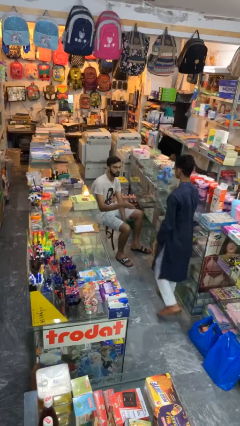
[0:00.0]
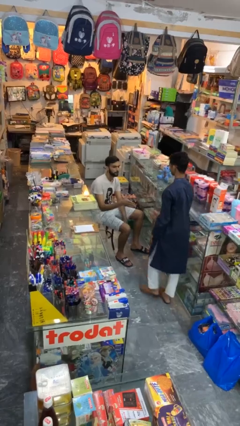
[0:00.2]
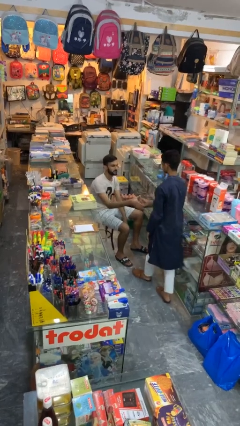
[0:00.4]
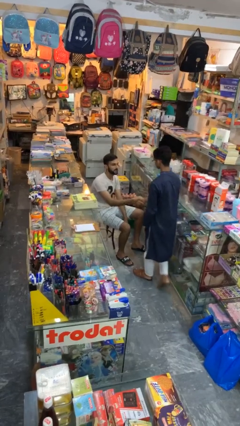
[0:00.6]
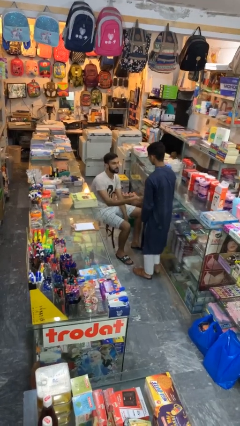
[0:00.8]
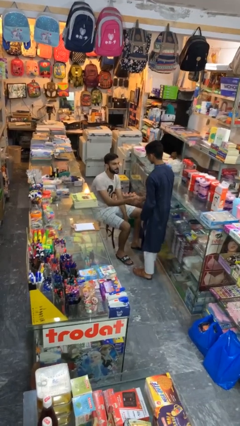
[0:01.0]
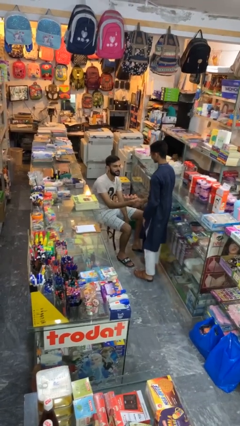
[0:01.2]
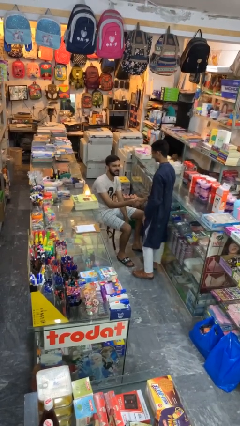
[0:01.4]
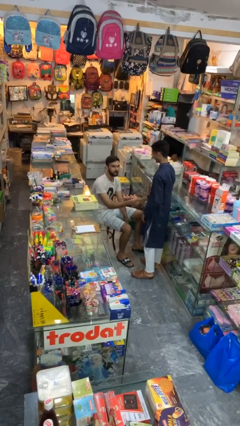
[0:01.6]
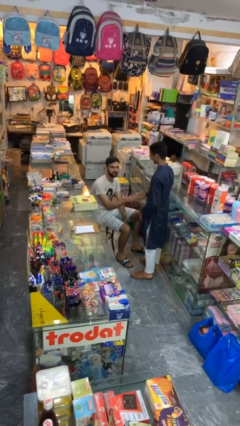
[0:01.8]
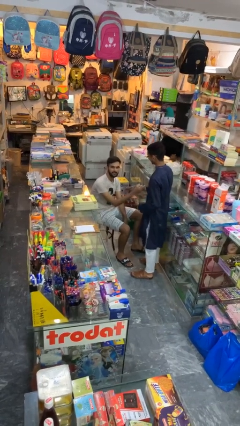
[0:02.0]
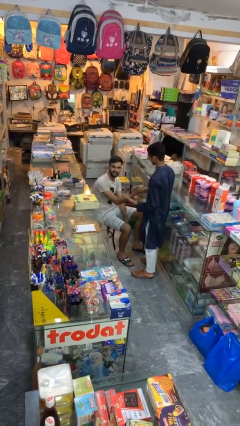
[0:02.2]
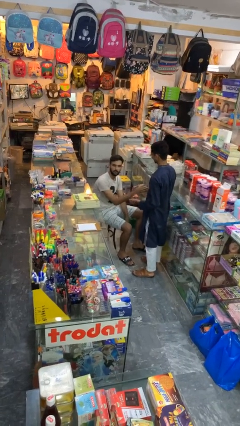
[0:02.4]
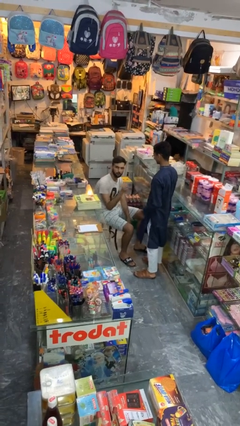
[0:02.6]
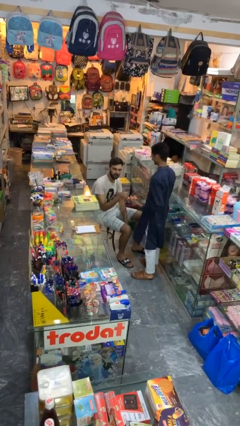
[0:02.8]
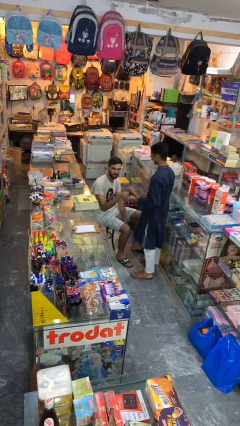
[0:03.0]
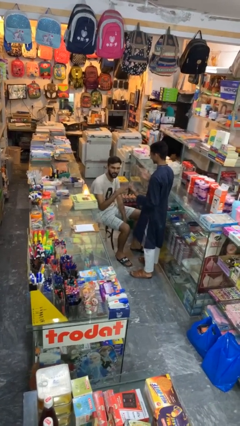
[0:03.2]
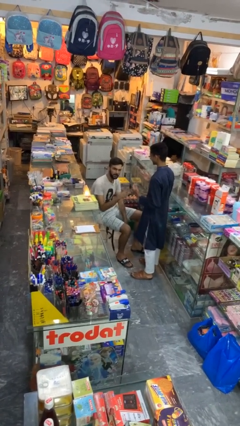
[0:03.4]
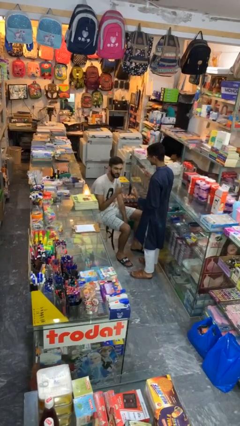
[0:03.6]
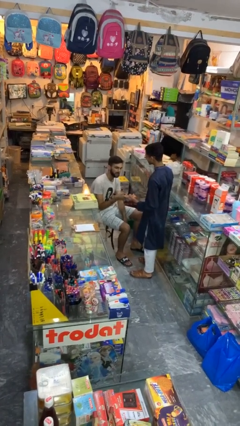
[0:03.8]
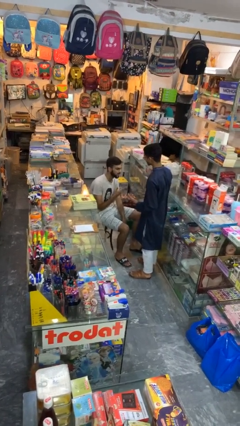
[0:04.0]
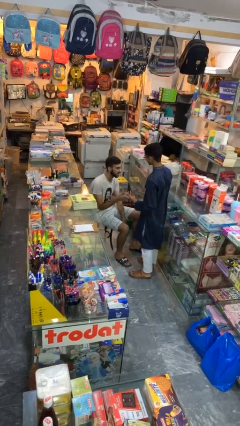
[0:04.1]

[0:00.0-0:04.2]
person shakes hand

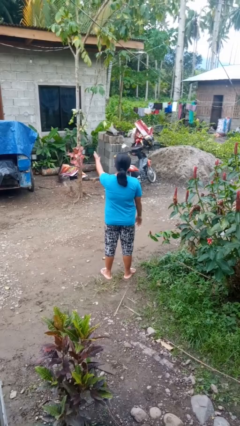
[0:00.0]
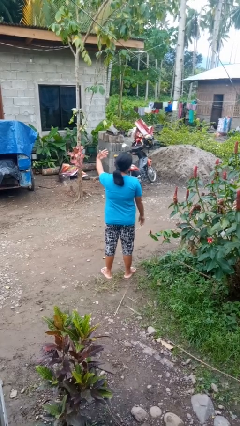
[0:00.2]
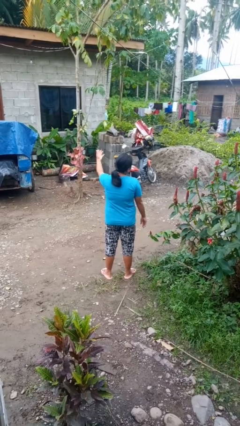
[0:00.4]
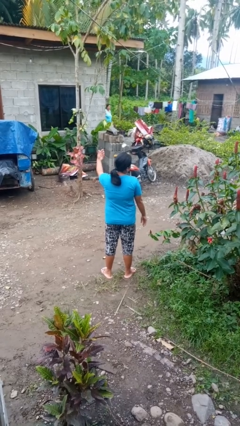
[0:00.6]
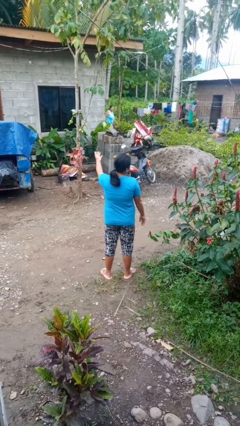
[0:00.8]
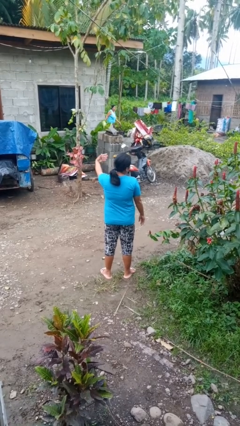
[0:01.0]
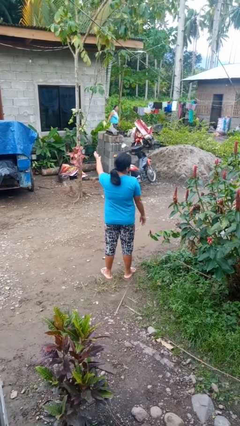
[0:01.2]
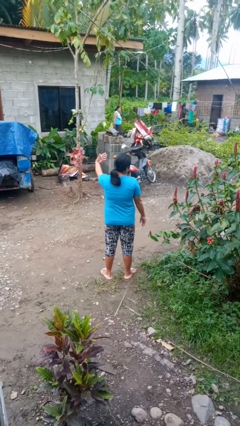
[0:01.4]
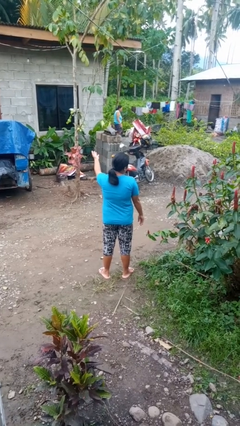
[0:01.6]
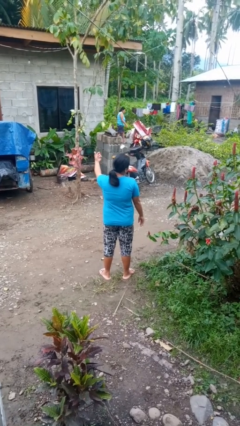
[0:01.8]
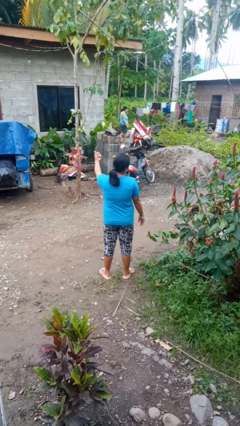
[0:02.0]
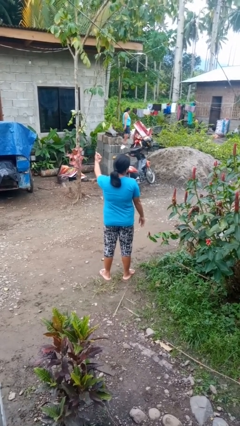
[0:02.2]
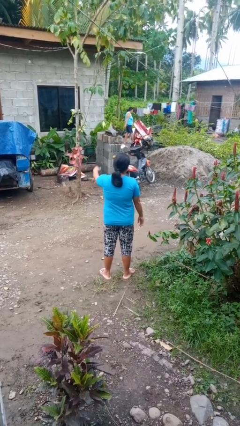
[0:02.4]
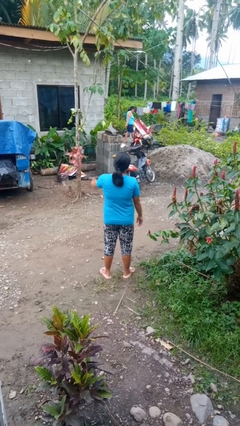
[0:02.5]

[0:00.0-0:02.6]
person gestures come here

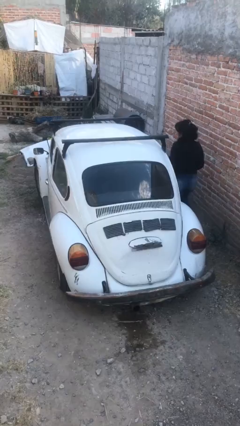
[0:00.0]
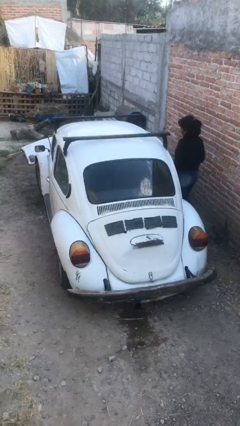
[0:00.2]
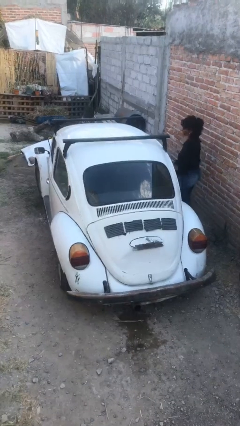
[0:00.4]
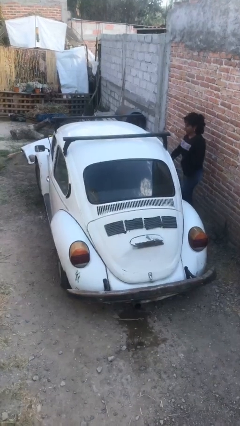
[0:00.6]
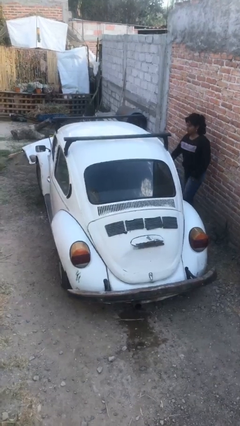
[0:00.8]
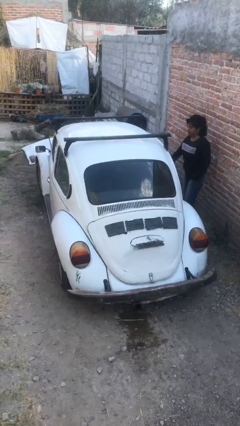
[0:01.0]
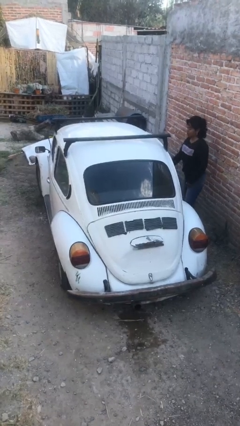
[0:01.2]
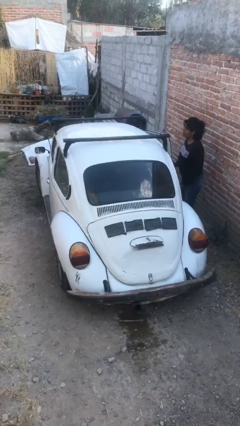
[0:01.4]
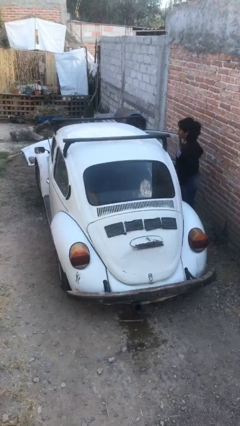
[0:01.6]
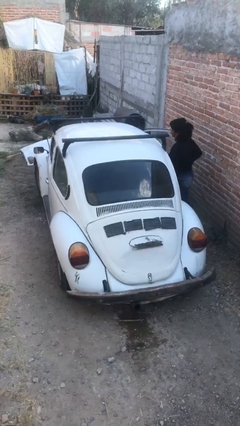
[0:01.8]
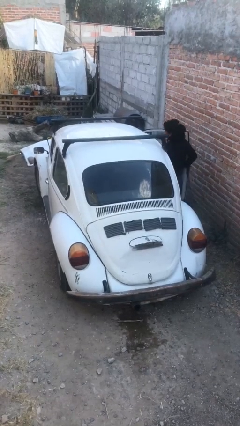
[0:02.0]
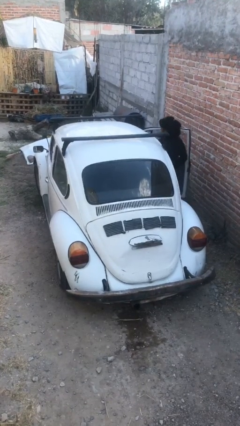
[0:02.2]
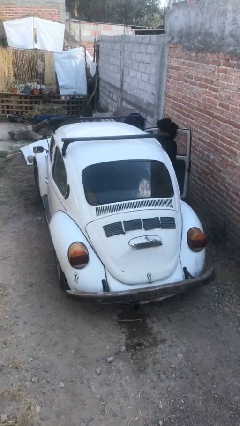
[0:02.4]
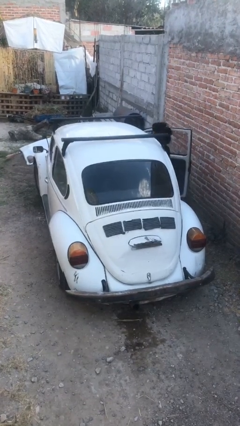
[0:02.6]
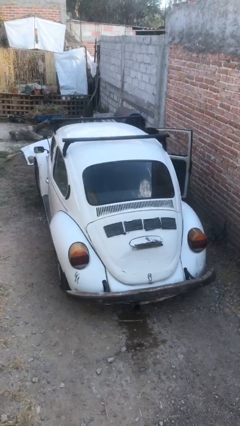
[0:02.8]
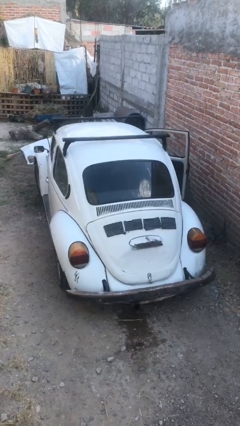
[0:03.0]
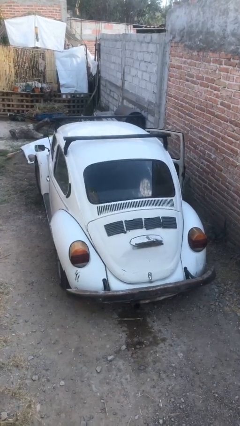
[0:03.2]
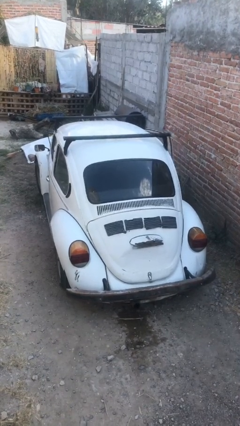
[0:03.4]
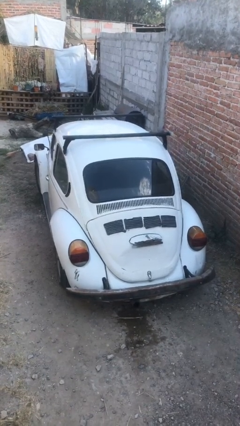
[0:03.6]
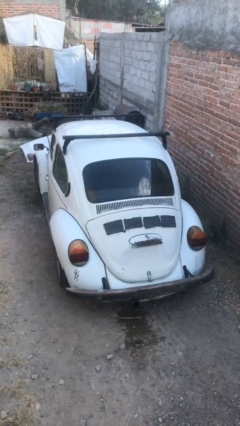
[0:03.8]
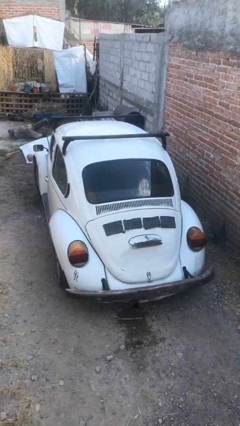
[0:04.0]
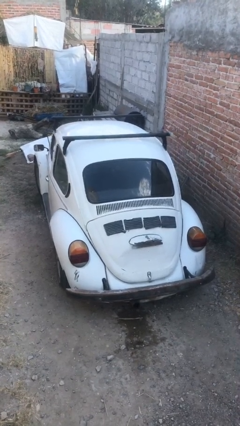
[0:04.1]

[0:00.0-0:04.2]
car picks up person

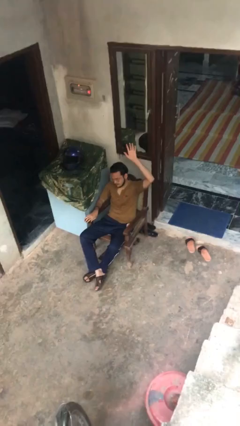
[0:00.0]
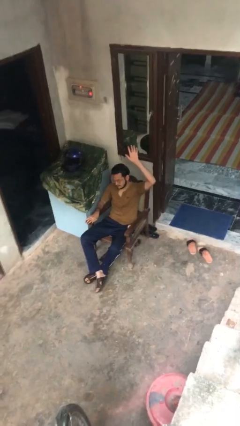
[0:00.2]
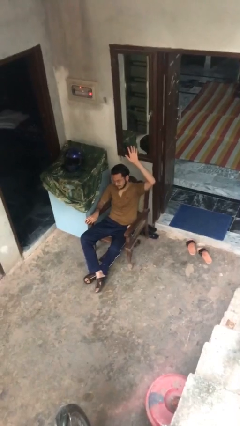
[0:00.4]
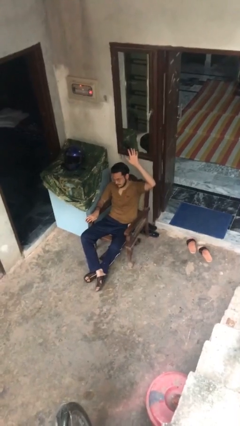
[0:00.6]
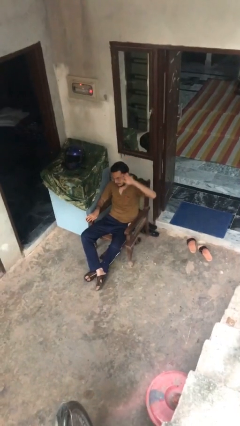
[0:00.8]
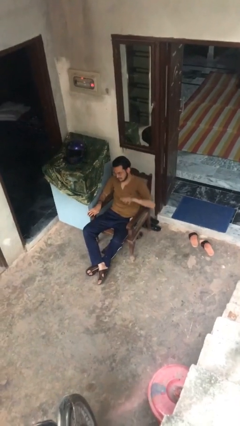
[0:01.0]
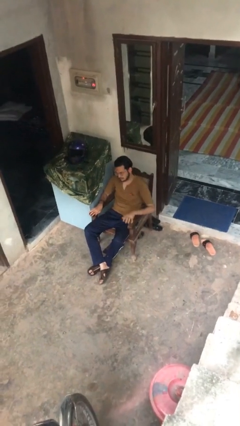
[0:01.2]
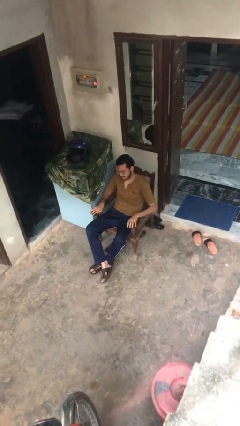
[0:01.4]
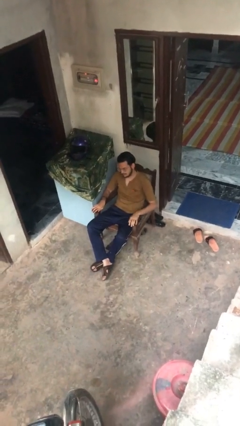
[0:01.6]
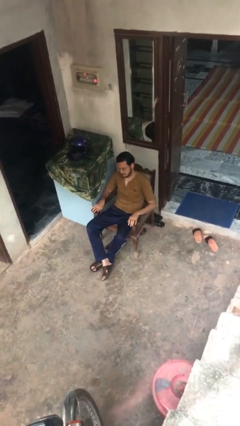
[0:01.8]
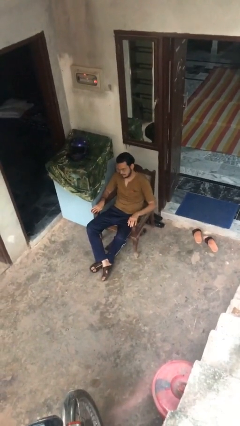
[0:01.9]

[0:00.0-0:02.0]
person gestures lower hand

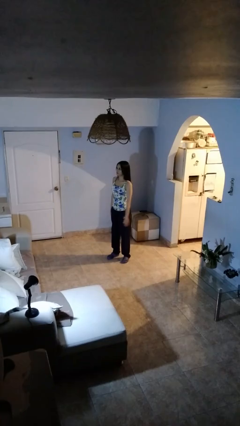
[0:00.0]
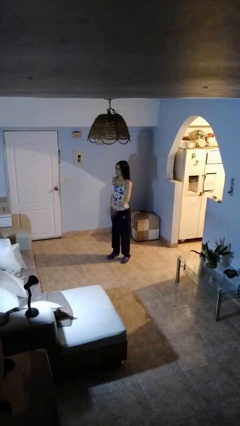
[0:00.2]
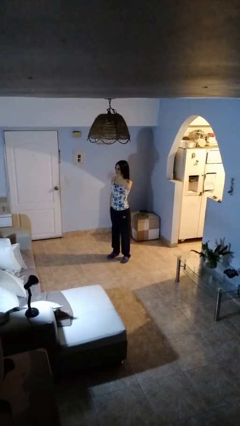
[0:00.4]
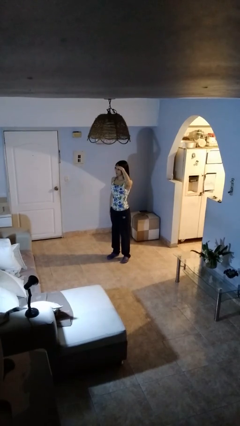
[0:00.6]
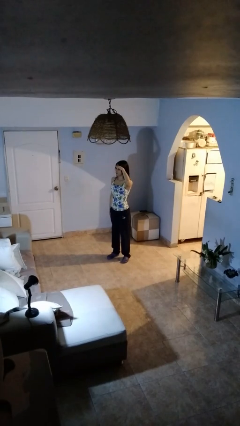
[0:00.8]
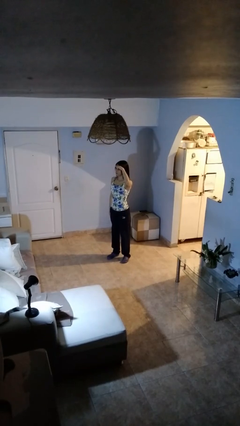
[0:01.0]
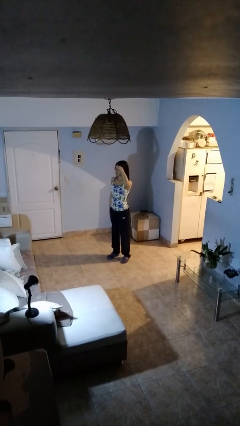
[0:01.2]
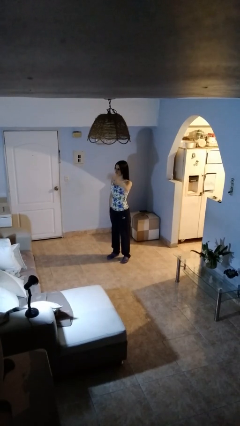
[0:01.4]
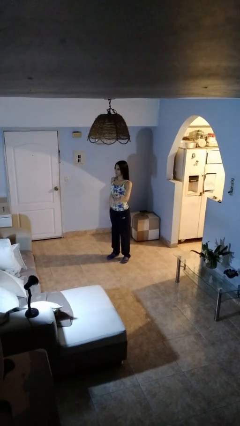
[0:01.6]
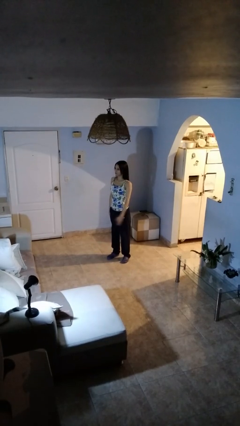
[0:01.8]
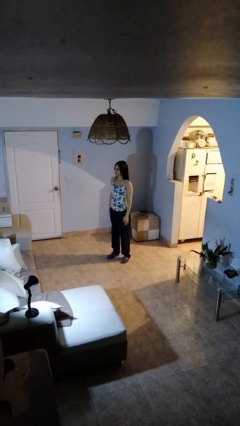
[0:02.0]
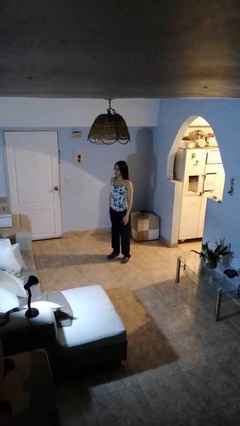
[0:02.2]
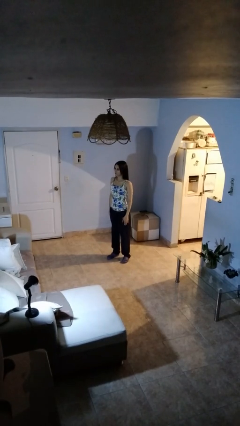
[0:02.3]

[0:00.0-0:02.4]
person salutes

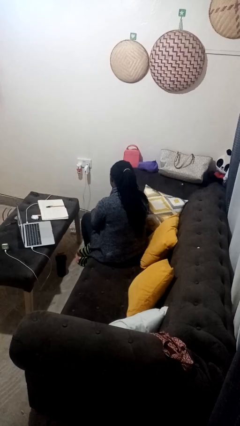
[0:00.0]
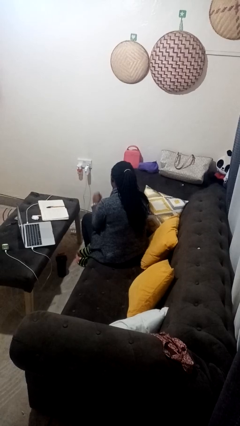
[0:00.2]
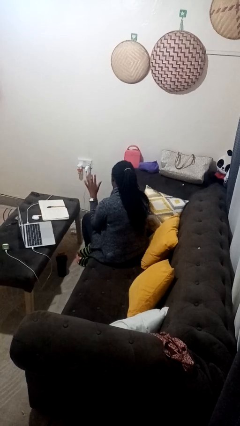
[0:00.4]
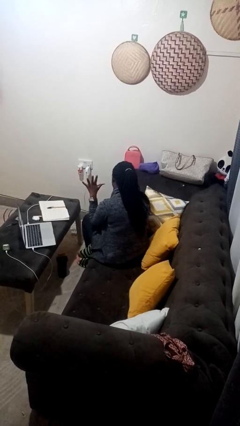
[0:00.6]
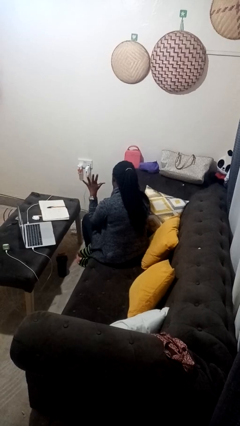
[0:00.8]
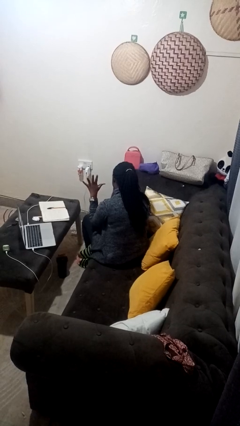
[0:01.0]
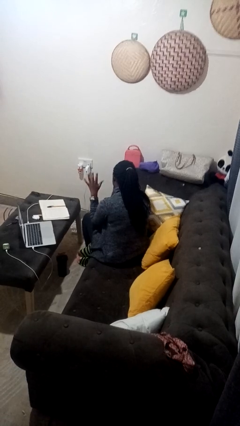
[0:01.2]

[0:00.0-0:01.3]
person gestures number five

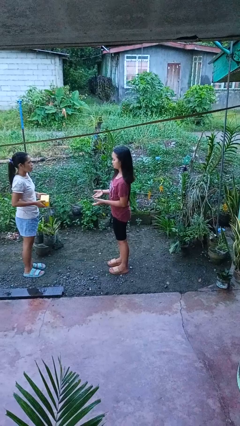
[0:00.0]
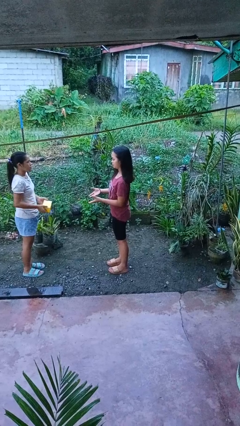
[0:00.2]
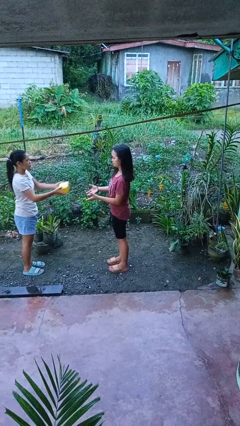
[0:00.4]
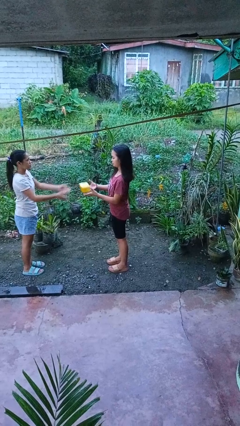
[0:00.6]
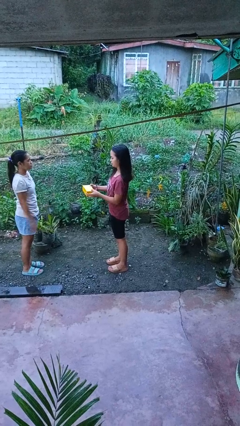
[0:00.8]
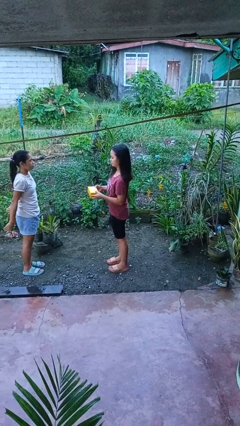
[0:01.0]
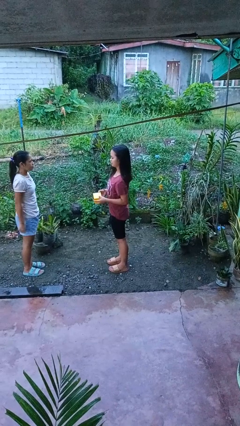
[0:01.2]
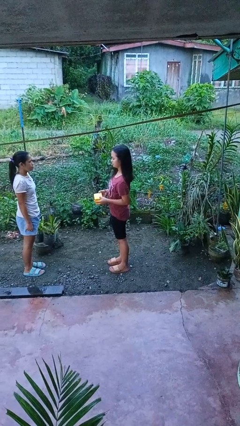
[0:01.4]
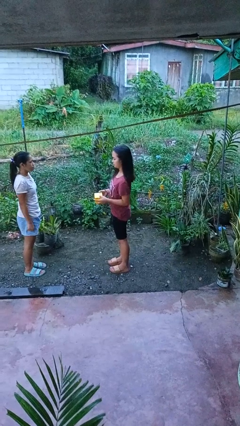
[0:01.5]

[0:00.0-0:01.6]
person catches object from person
